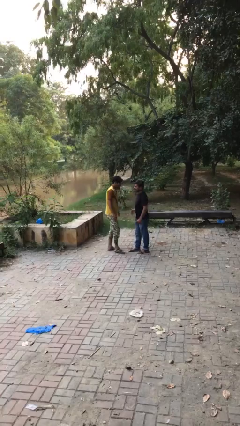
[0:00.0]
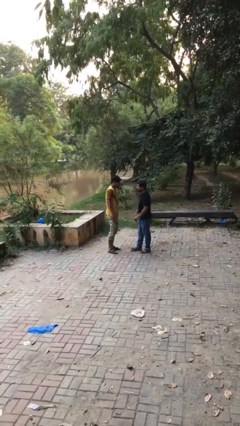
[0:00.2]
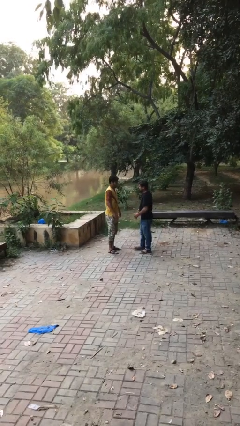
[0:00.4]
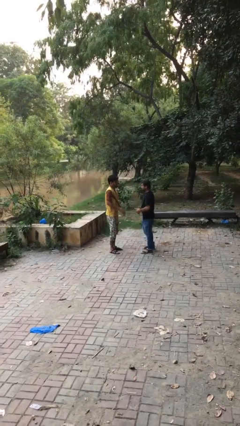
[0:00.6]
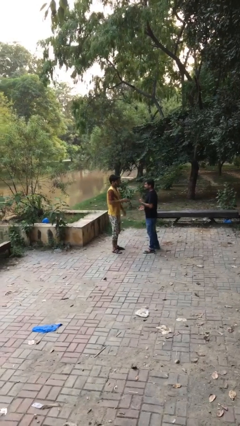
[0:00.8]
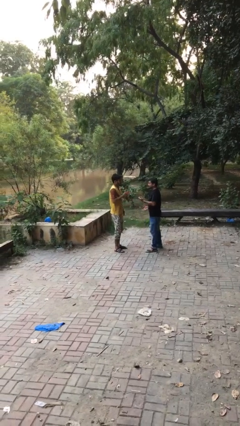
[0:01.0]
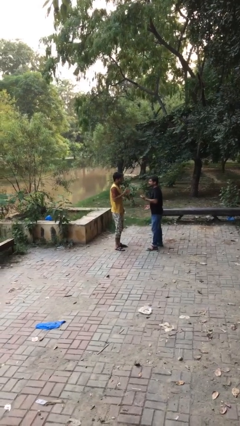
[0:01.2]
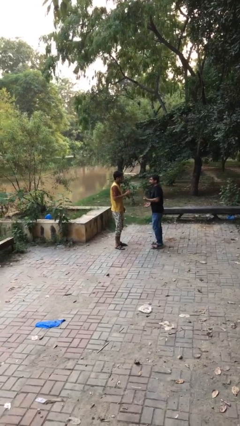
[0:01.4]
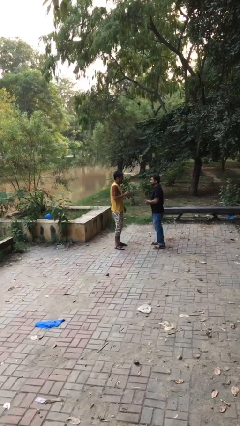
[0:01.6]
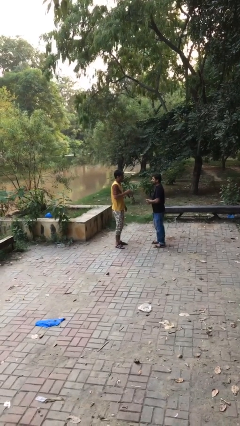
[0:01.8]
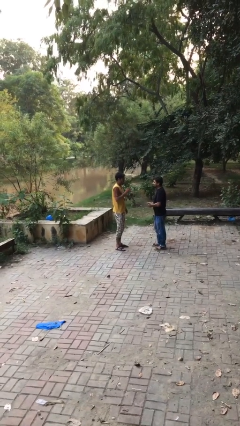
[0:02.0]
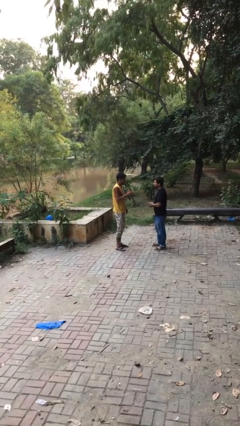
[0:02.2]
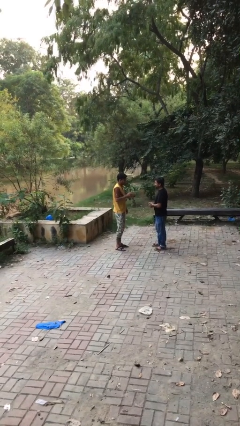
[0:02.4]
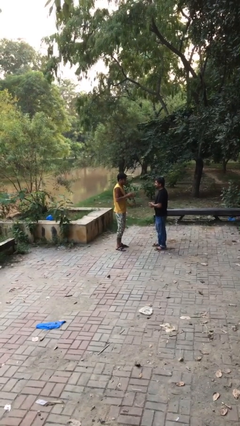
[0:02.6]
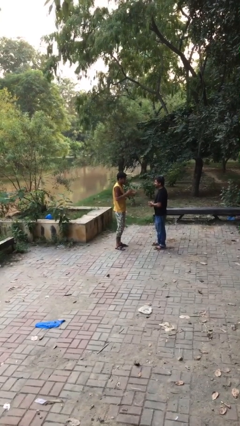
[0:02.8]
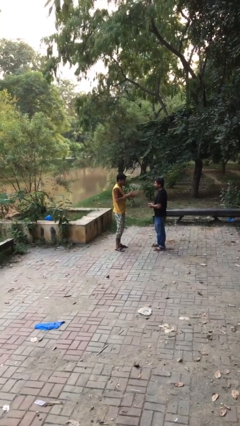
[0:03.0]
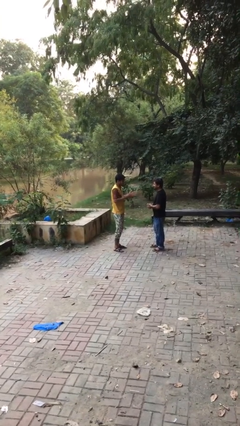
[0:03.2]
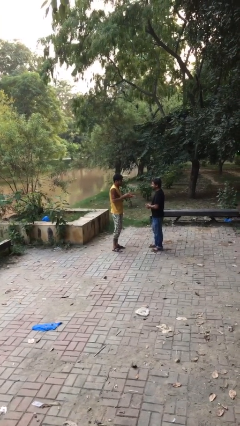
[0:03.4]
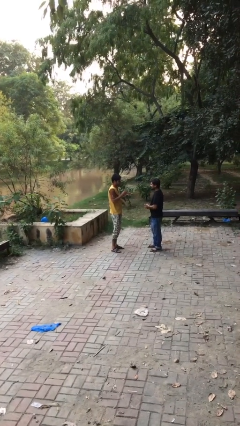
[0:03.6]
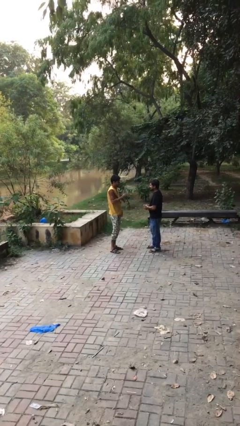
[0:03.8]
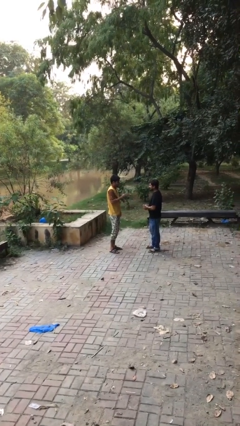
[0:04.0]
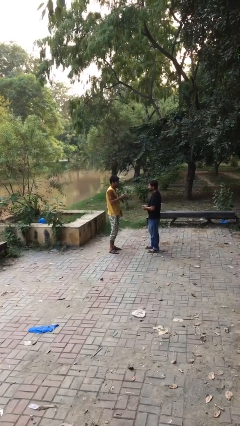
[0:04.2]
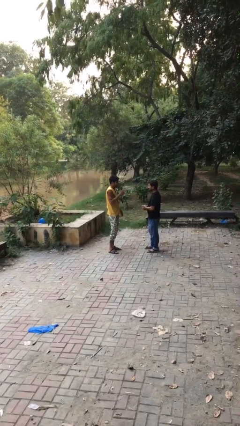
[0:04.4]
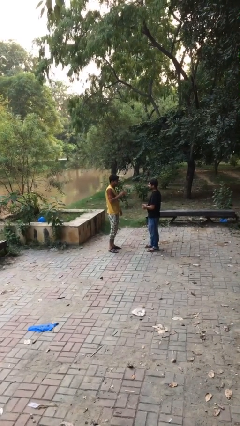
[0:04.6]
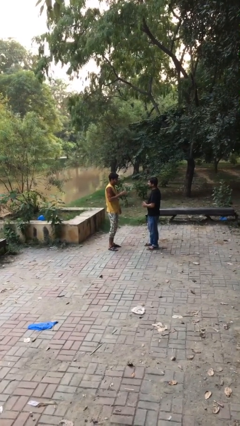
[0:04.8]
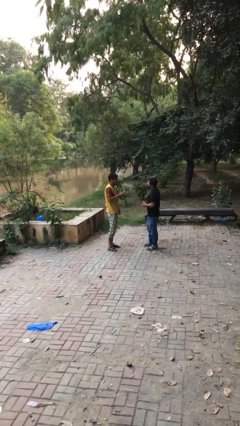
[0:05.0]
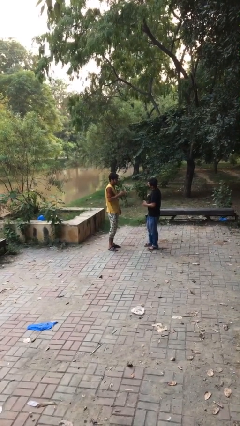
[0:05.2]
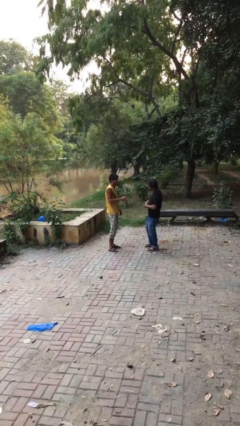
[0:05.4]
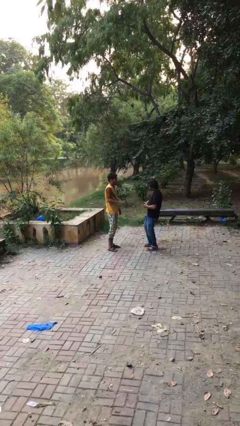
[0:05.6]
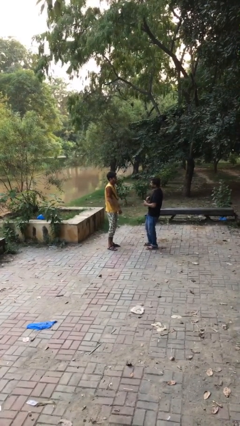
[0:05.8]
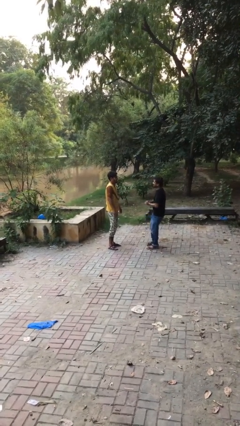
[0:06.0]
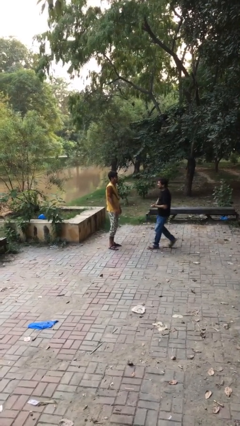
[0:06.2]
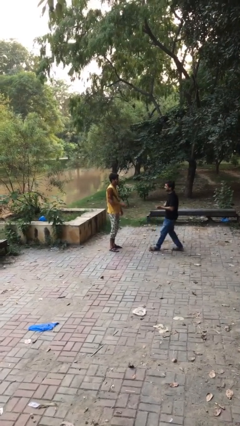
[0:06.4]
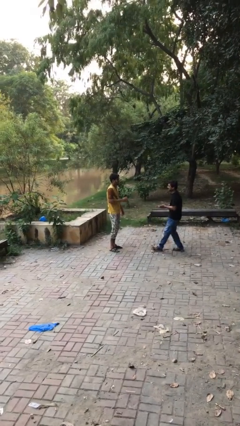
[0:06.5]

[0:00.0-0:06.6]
person talks to person

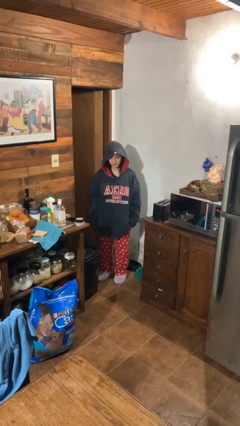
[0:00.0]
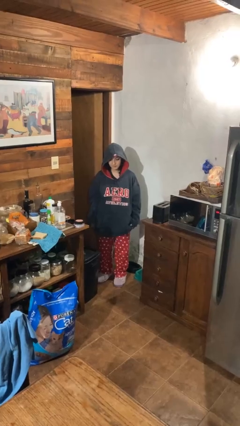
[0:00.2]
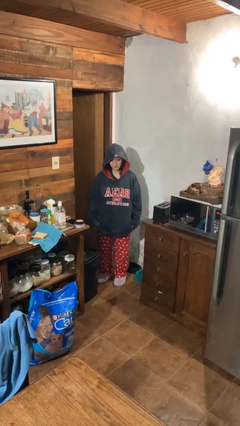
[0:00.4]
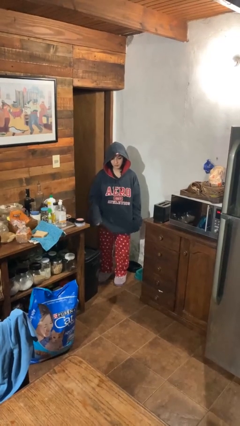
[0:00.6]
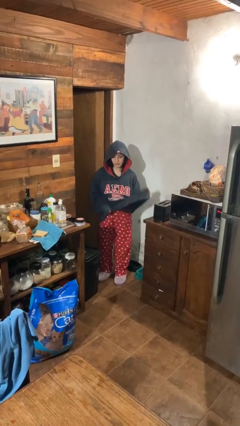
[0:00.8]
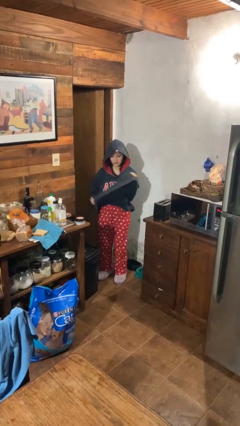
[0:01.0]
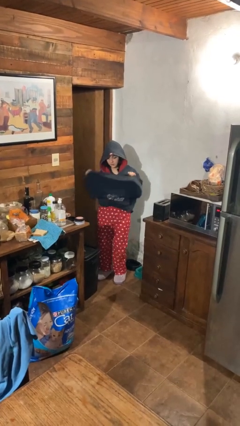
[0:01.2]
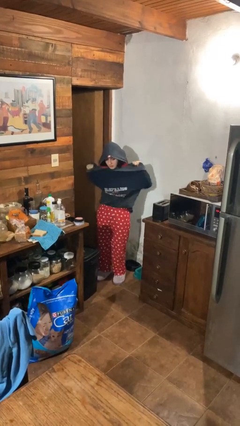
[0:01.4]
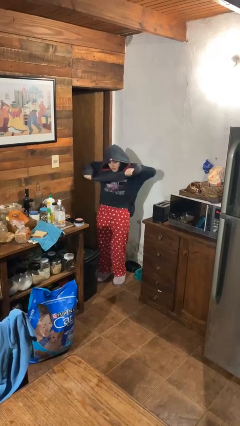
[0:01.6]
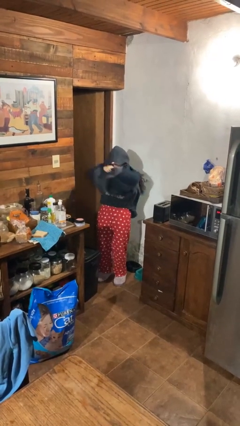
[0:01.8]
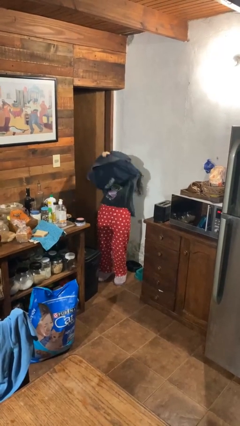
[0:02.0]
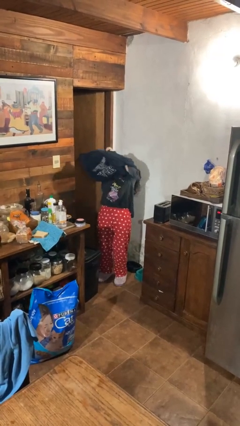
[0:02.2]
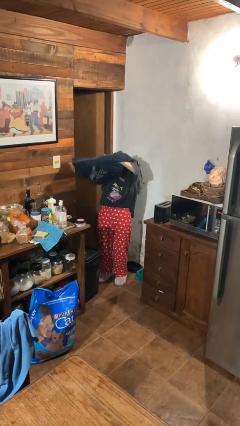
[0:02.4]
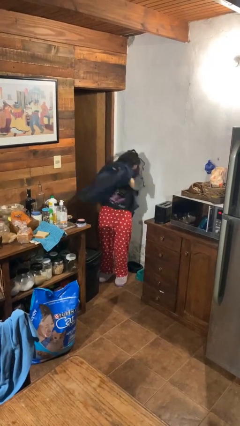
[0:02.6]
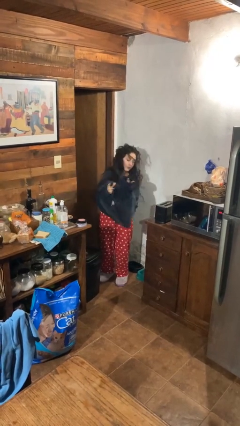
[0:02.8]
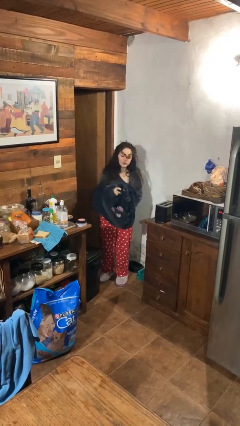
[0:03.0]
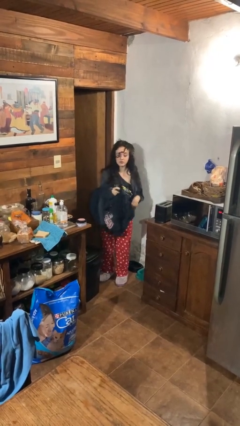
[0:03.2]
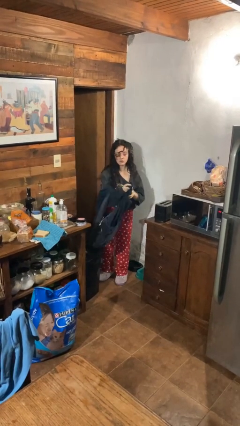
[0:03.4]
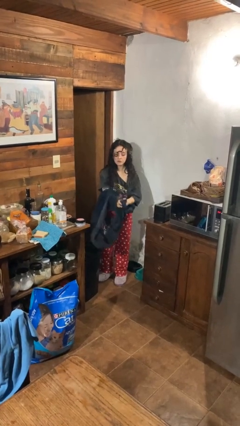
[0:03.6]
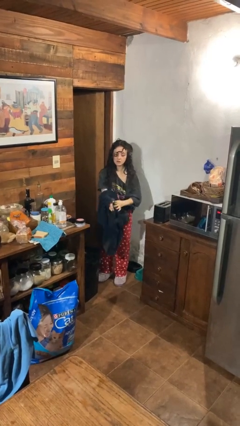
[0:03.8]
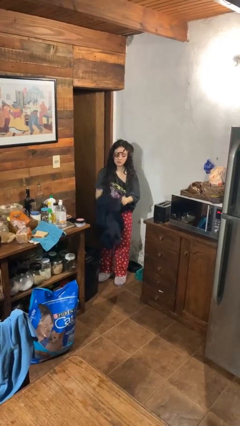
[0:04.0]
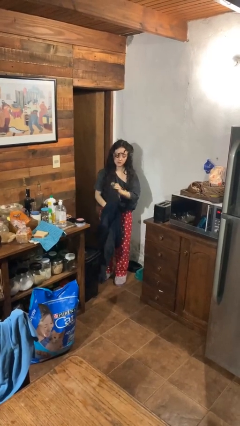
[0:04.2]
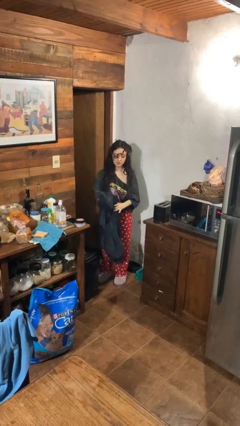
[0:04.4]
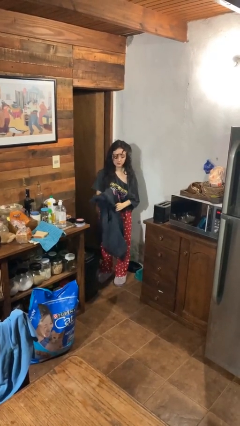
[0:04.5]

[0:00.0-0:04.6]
person takes off hoodie

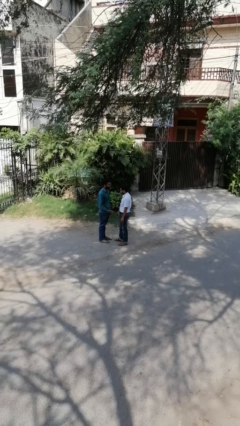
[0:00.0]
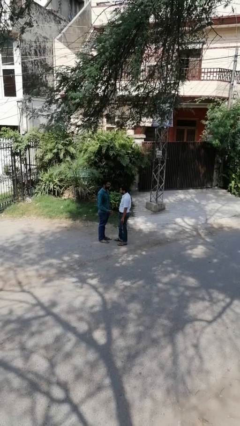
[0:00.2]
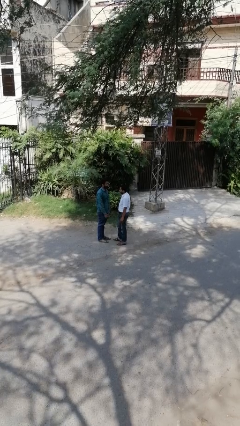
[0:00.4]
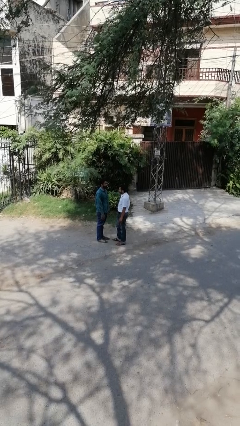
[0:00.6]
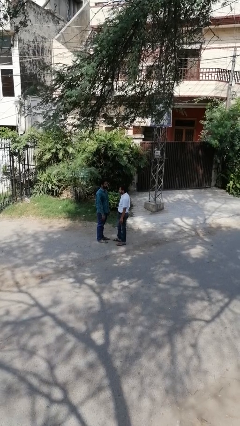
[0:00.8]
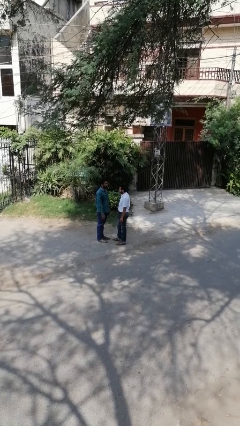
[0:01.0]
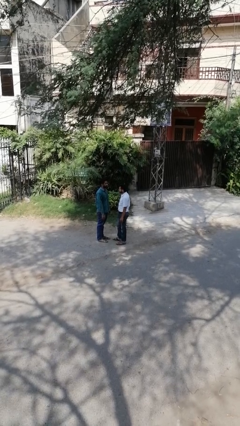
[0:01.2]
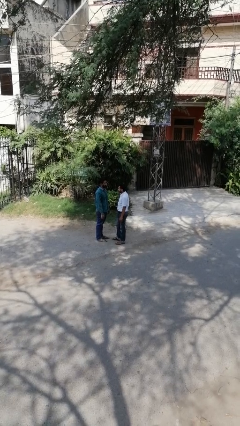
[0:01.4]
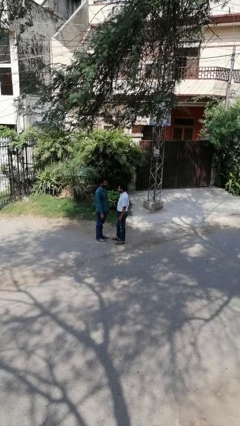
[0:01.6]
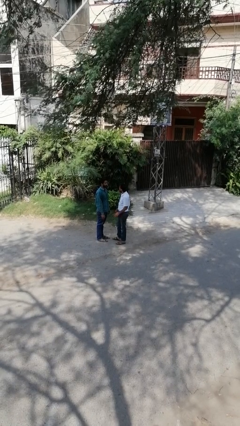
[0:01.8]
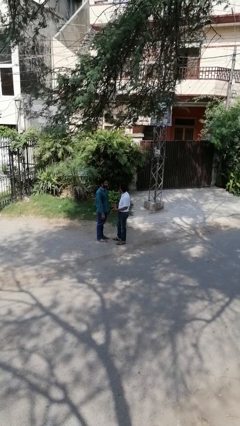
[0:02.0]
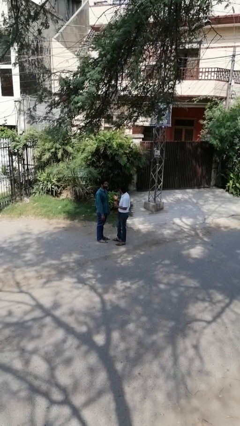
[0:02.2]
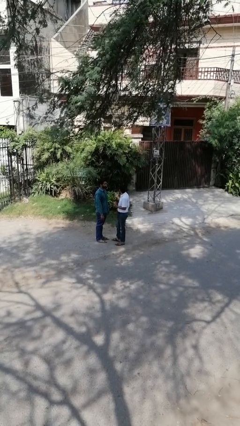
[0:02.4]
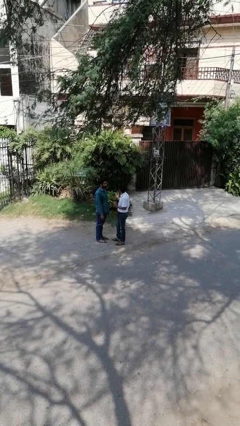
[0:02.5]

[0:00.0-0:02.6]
person highfives hand

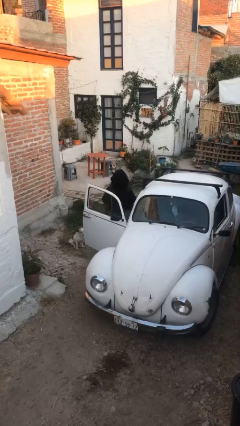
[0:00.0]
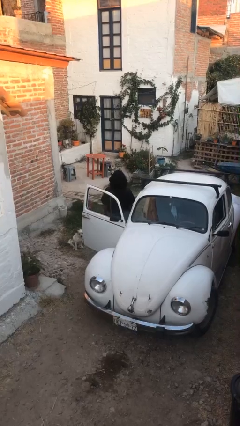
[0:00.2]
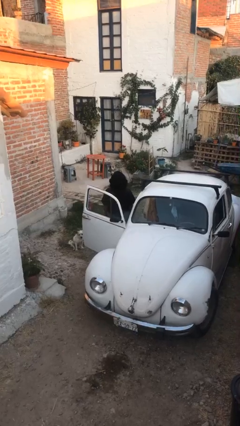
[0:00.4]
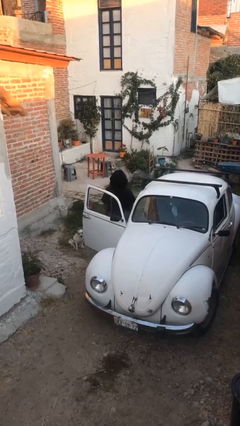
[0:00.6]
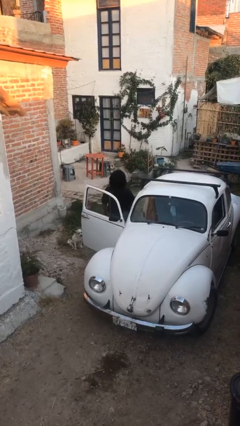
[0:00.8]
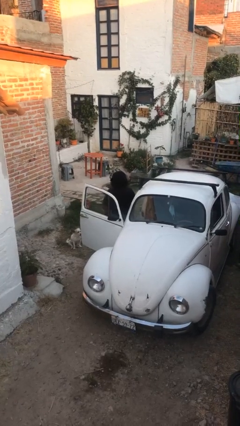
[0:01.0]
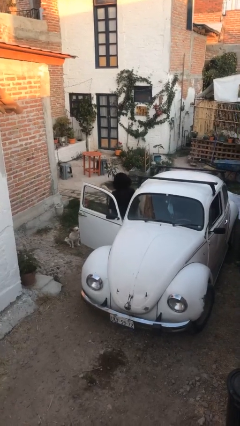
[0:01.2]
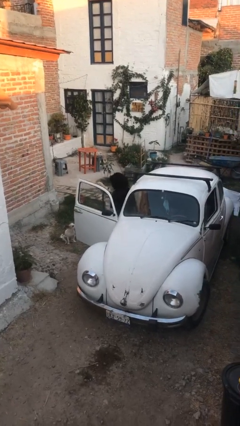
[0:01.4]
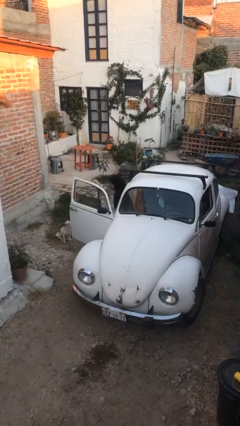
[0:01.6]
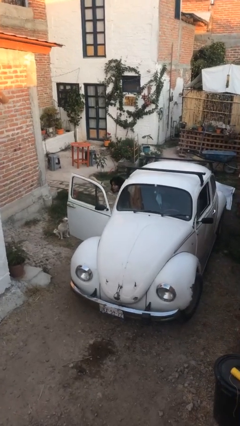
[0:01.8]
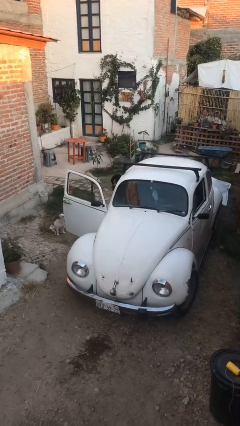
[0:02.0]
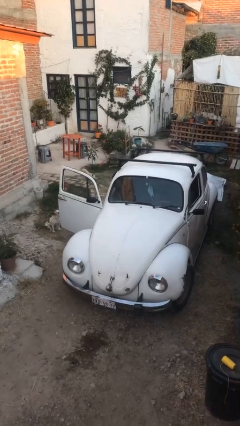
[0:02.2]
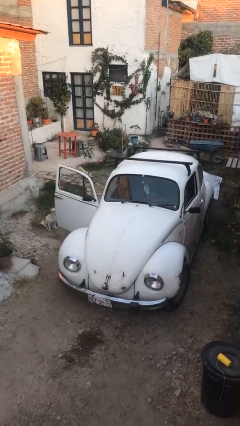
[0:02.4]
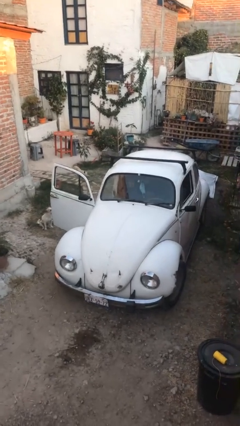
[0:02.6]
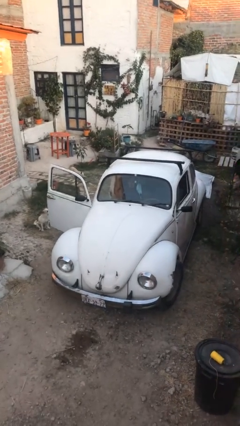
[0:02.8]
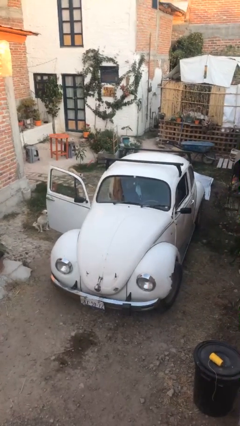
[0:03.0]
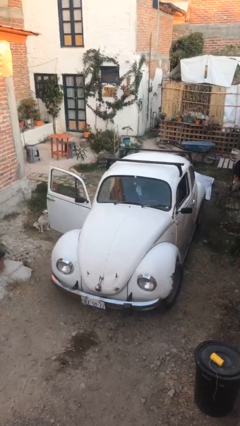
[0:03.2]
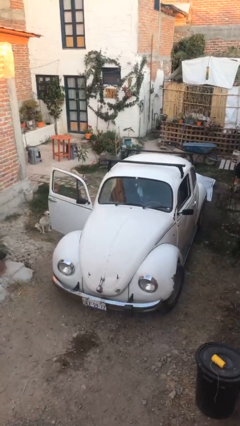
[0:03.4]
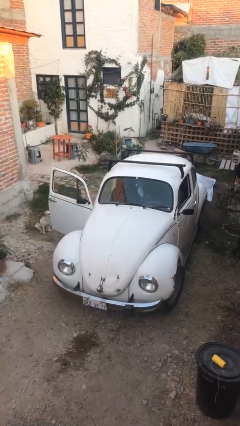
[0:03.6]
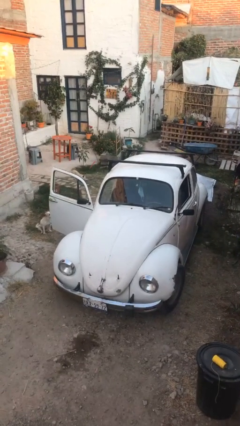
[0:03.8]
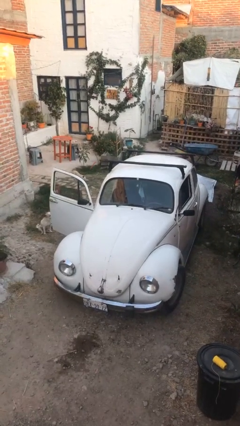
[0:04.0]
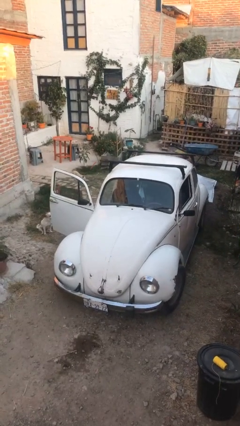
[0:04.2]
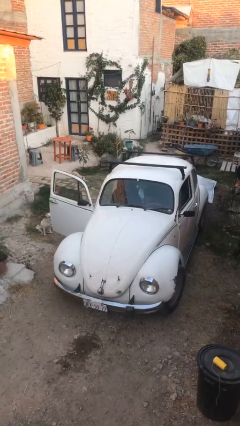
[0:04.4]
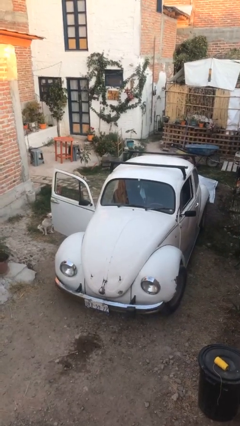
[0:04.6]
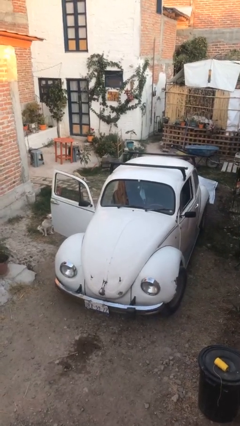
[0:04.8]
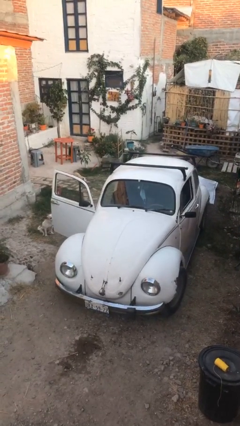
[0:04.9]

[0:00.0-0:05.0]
person enters car
